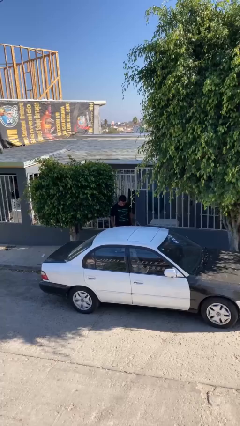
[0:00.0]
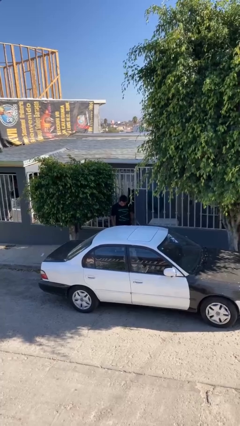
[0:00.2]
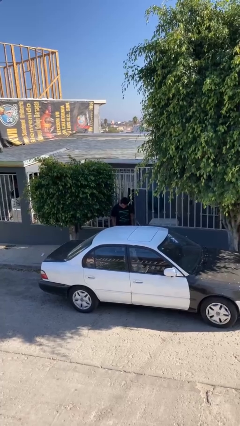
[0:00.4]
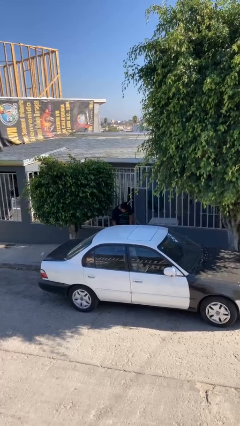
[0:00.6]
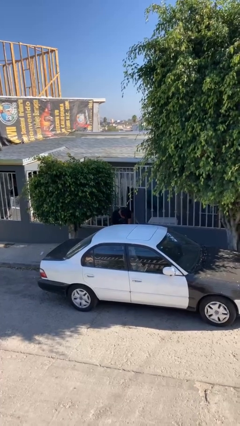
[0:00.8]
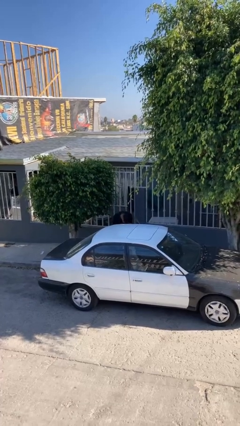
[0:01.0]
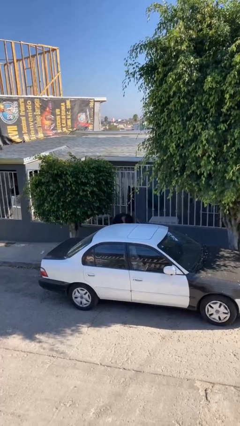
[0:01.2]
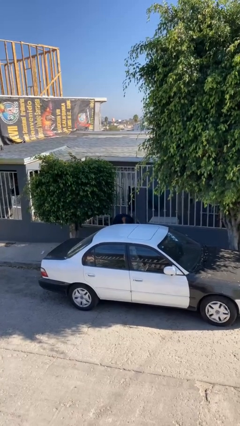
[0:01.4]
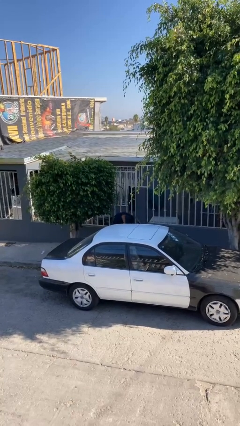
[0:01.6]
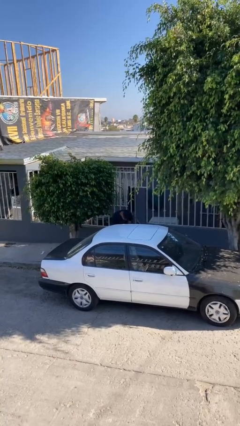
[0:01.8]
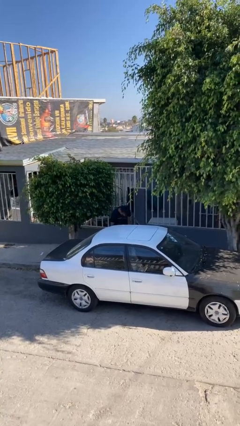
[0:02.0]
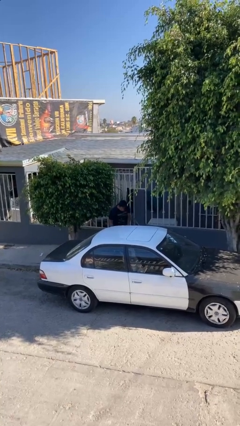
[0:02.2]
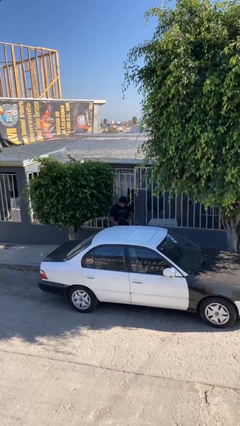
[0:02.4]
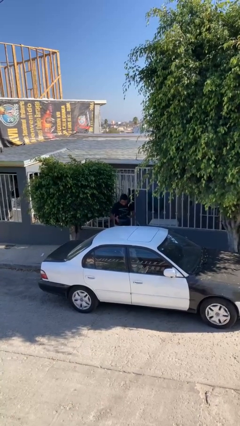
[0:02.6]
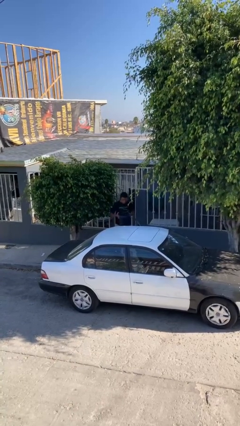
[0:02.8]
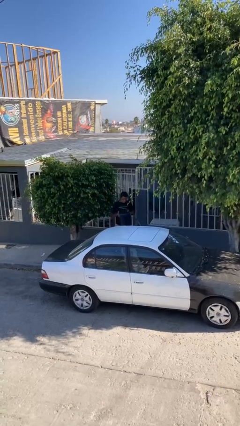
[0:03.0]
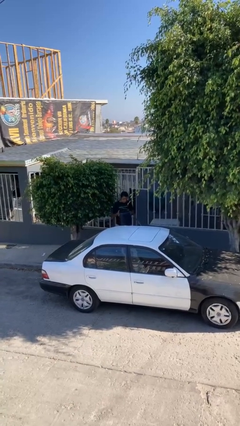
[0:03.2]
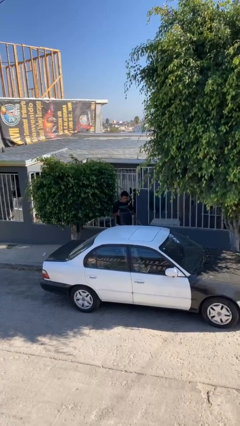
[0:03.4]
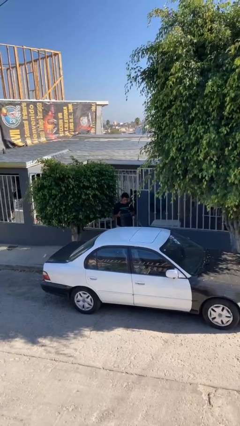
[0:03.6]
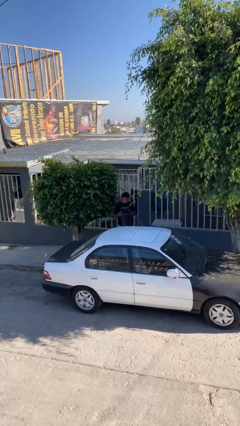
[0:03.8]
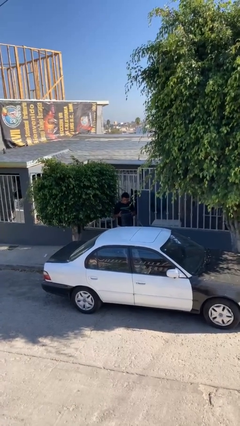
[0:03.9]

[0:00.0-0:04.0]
person unloads car

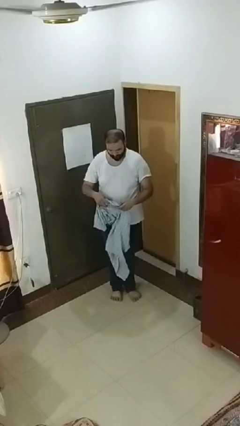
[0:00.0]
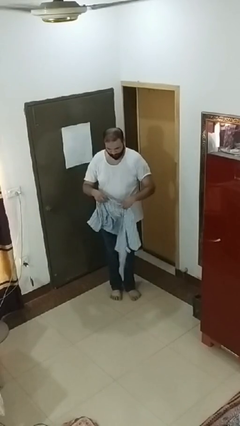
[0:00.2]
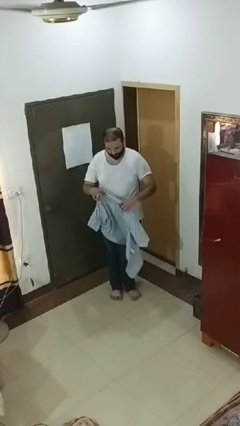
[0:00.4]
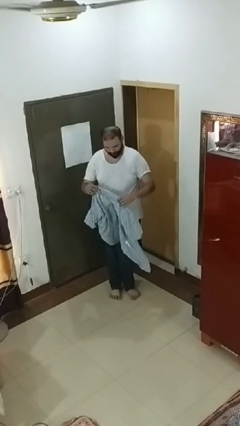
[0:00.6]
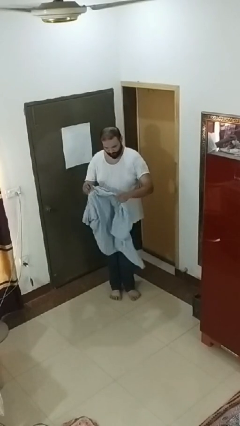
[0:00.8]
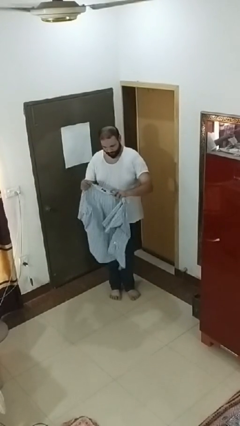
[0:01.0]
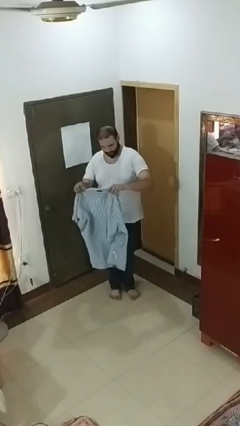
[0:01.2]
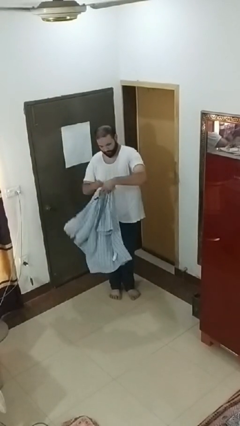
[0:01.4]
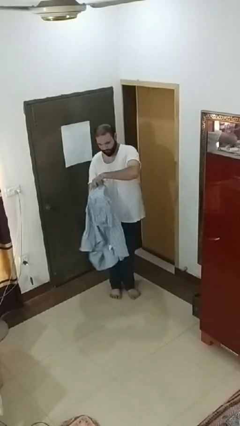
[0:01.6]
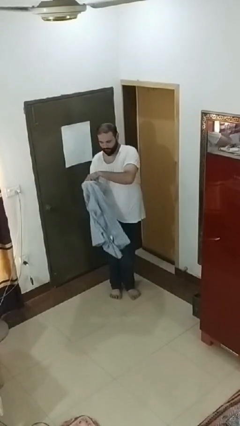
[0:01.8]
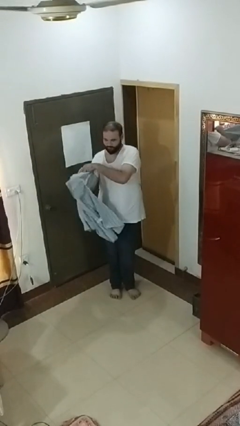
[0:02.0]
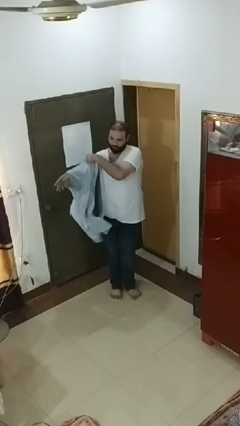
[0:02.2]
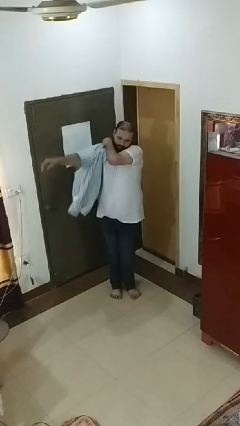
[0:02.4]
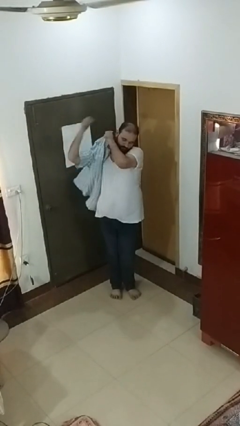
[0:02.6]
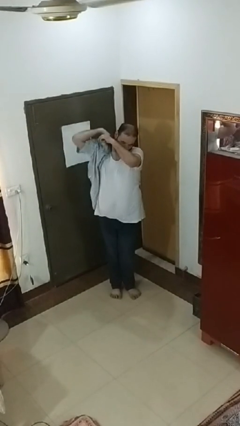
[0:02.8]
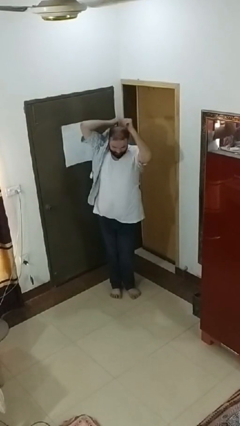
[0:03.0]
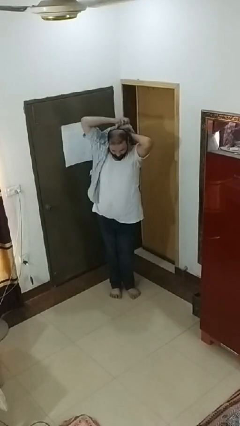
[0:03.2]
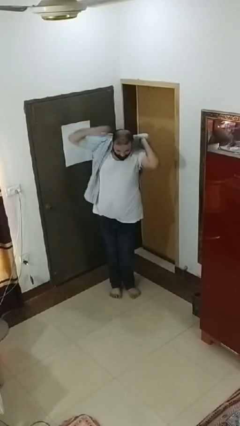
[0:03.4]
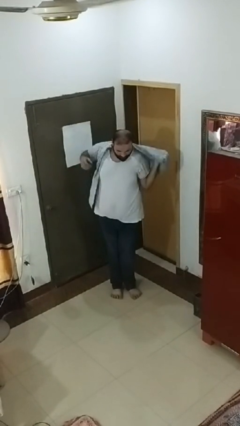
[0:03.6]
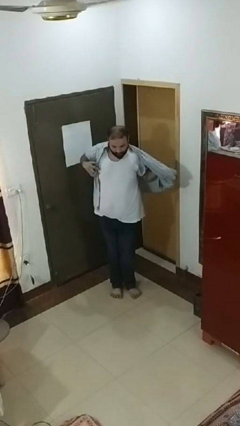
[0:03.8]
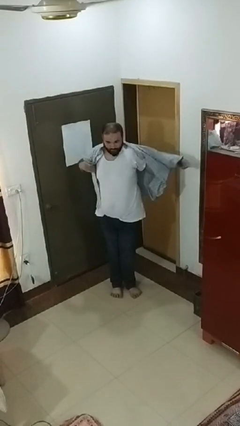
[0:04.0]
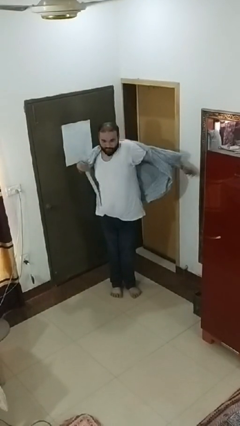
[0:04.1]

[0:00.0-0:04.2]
person puts on shirt

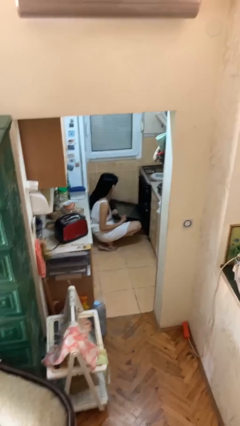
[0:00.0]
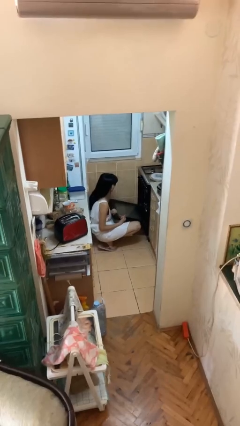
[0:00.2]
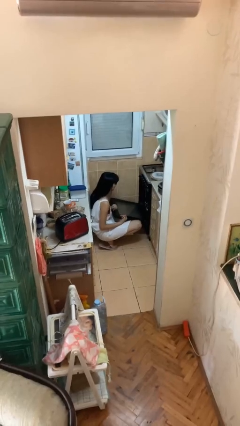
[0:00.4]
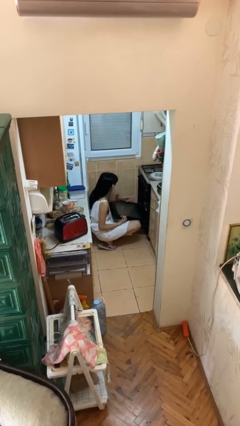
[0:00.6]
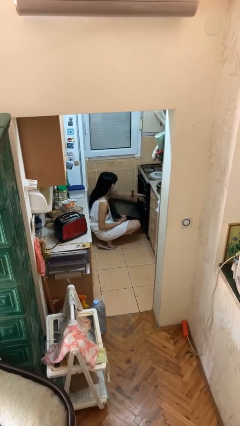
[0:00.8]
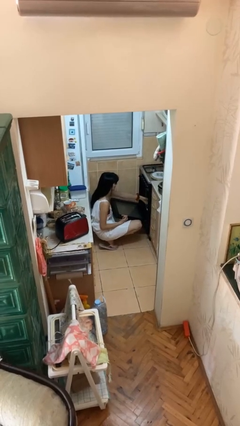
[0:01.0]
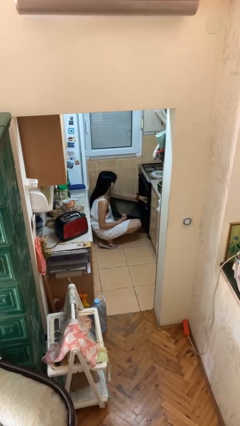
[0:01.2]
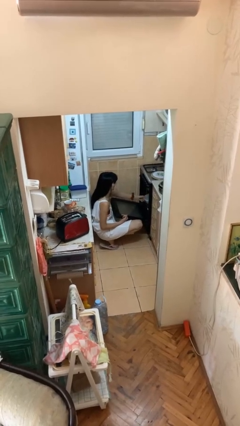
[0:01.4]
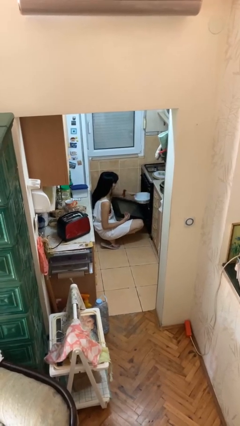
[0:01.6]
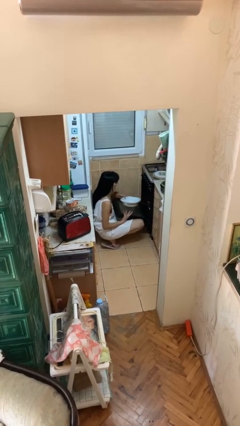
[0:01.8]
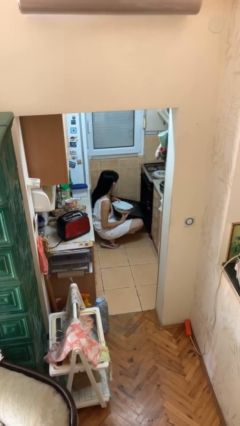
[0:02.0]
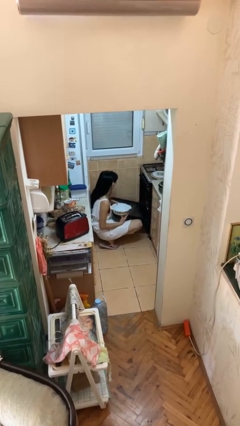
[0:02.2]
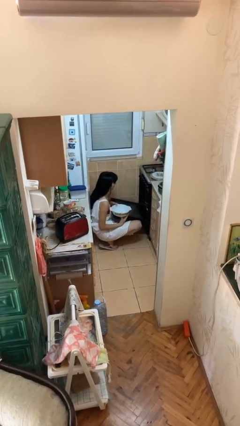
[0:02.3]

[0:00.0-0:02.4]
person takes object from oven

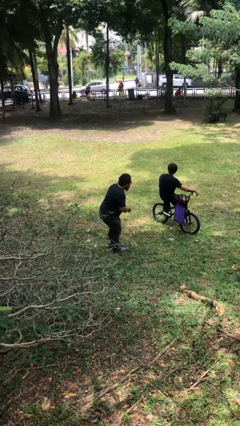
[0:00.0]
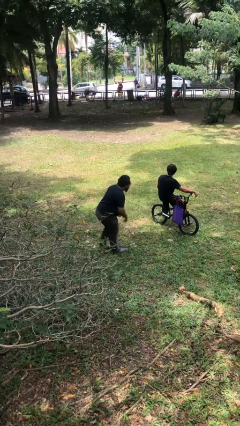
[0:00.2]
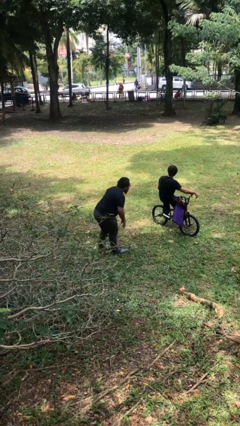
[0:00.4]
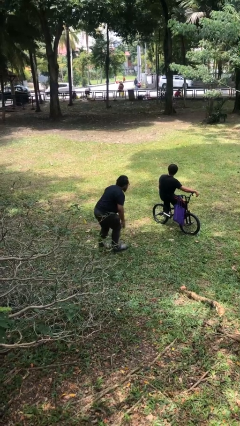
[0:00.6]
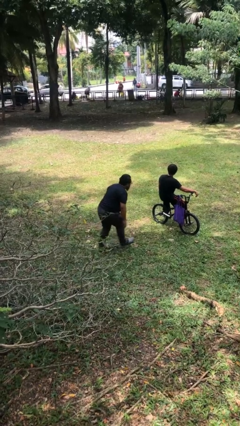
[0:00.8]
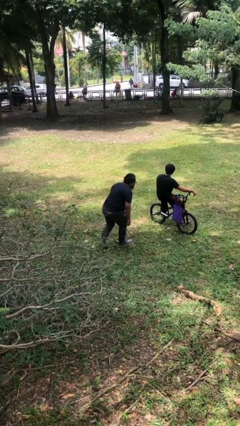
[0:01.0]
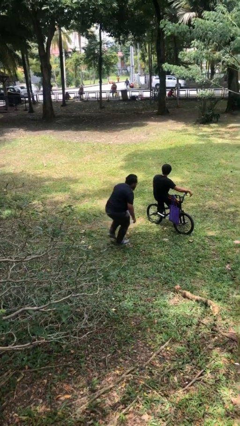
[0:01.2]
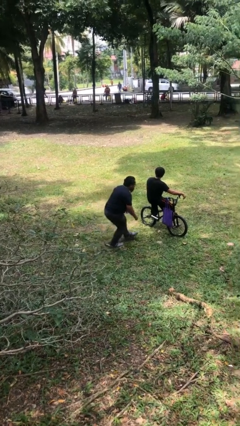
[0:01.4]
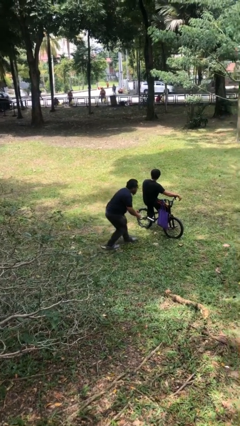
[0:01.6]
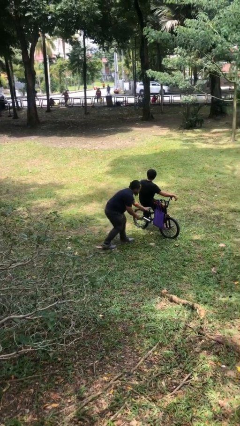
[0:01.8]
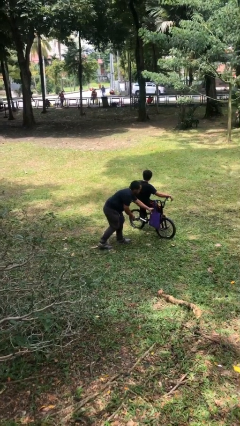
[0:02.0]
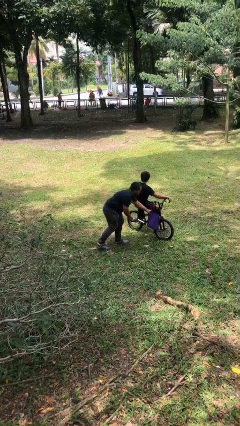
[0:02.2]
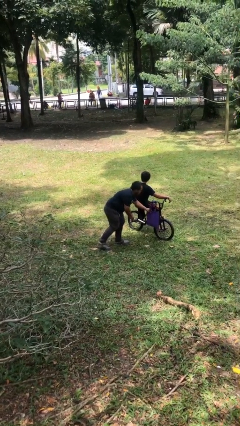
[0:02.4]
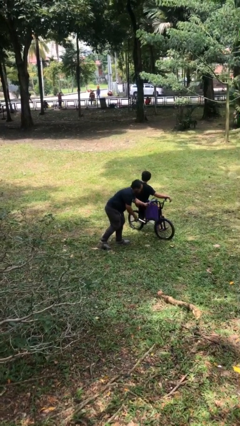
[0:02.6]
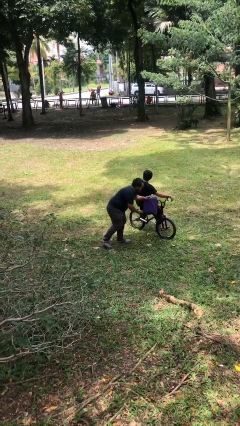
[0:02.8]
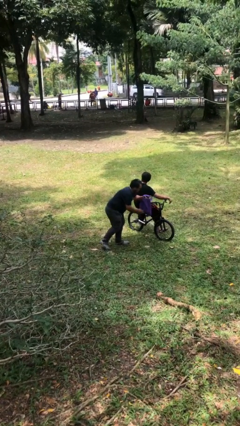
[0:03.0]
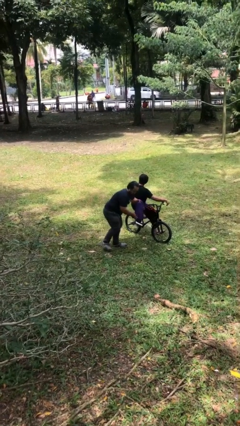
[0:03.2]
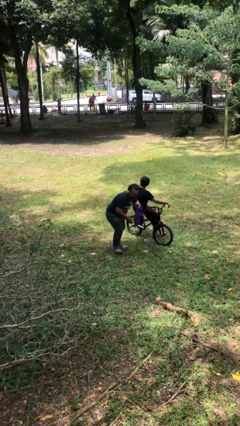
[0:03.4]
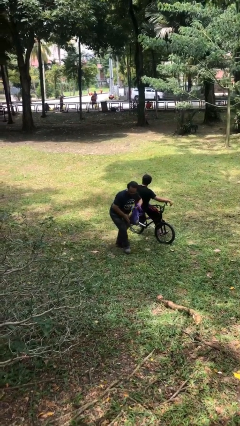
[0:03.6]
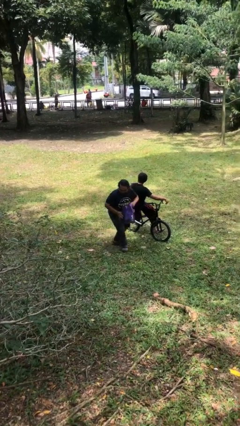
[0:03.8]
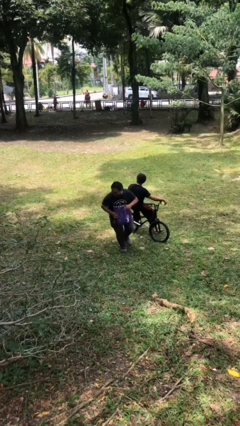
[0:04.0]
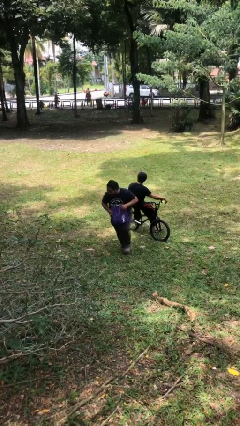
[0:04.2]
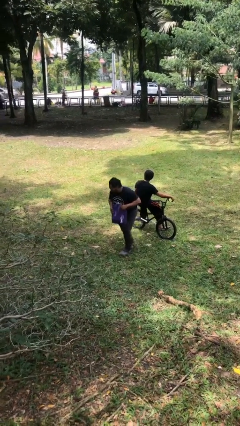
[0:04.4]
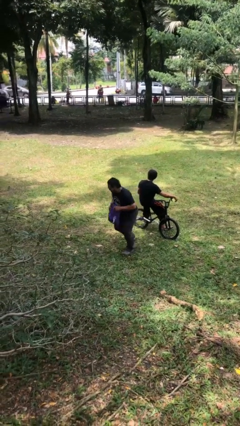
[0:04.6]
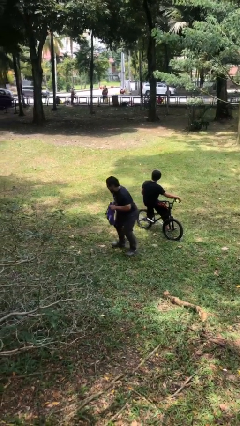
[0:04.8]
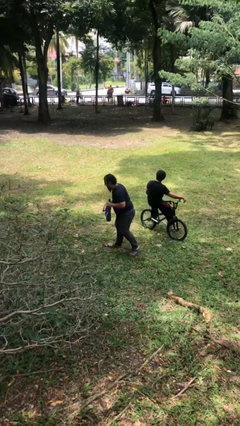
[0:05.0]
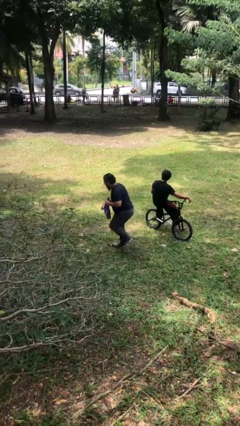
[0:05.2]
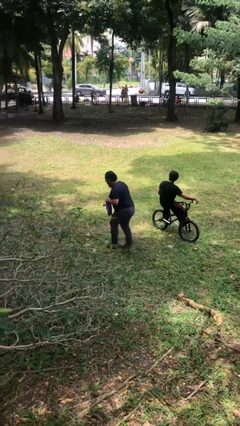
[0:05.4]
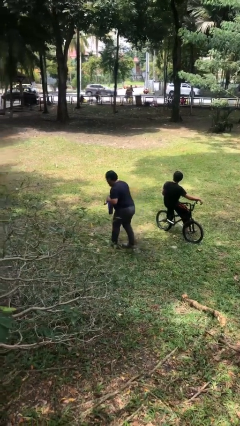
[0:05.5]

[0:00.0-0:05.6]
person steals object from person

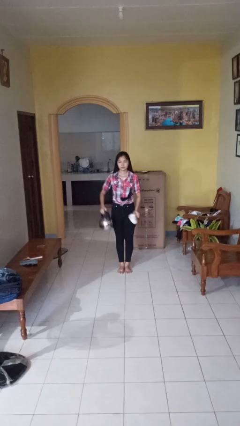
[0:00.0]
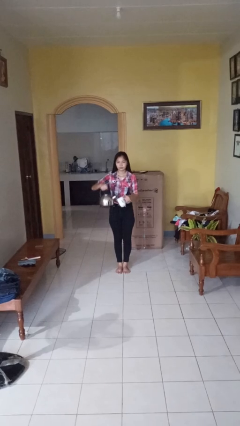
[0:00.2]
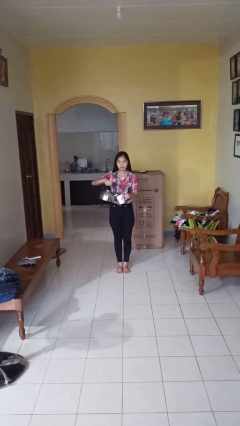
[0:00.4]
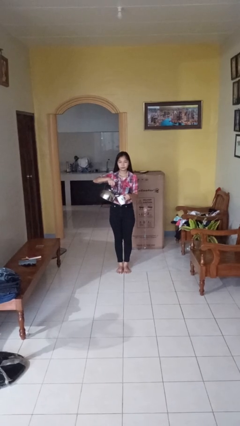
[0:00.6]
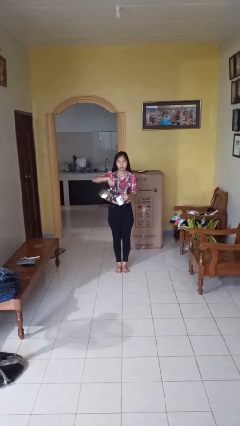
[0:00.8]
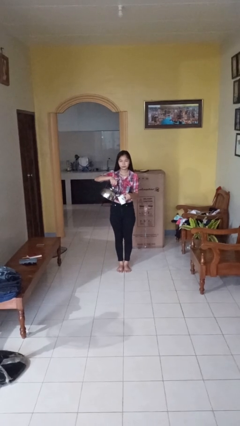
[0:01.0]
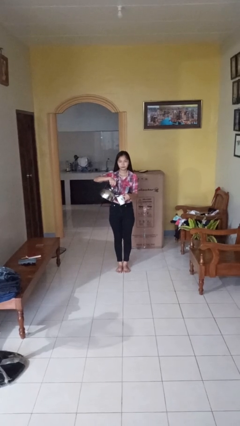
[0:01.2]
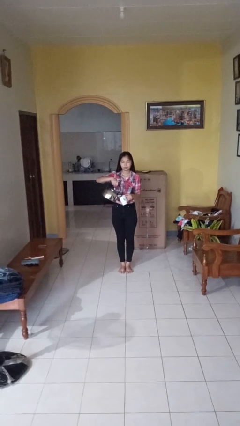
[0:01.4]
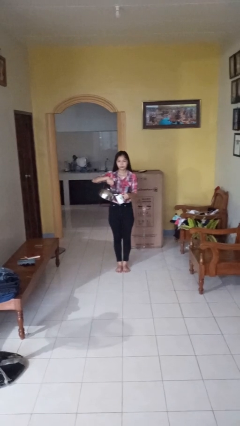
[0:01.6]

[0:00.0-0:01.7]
person pours coffee into mug
